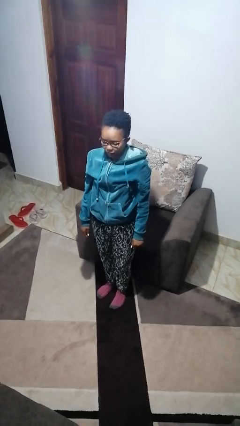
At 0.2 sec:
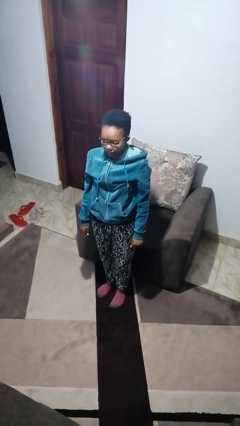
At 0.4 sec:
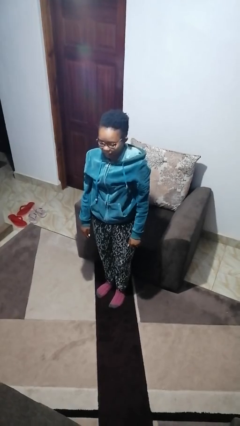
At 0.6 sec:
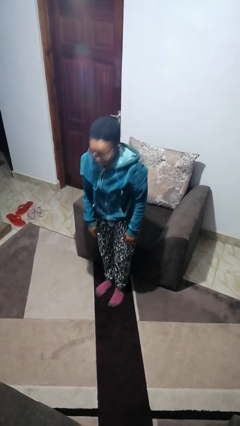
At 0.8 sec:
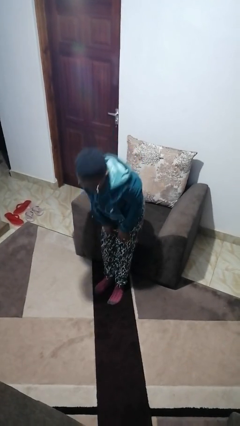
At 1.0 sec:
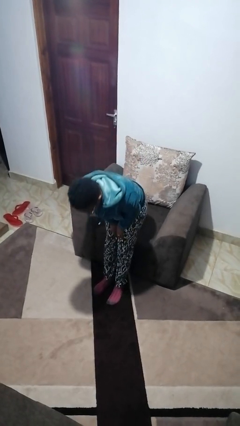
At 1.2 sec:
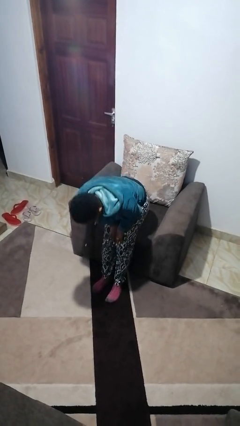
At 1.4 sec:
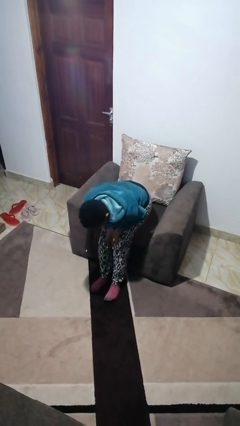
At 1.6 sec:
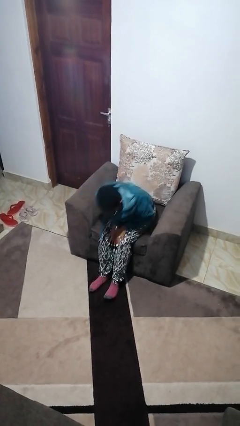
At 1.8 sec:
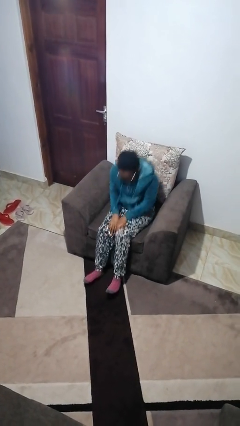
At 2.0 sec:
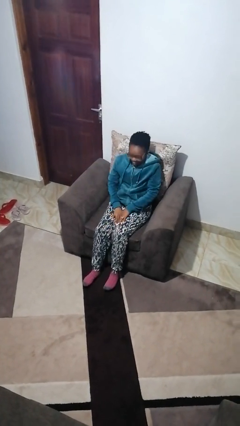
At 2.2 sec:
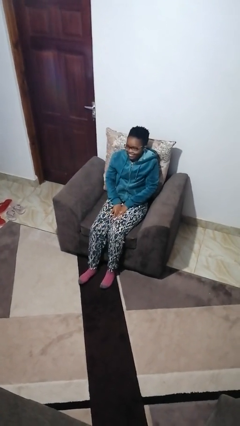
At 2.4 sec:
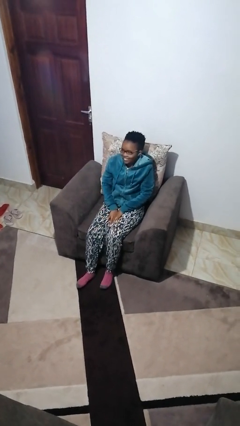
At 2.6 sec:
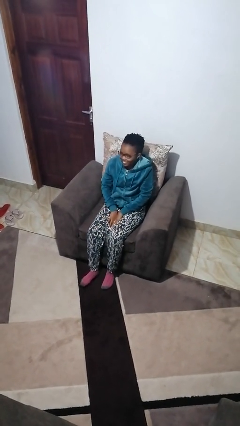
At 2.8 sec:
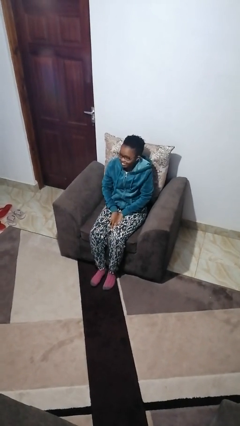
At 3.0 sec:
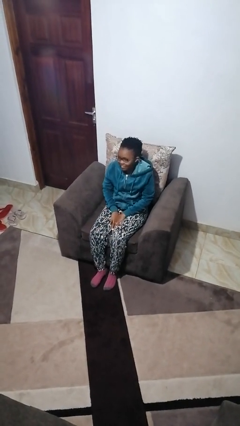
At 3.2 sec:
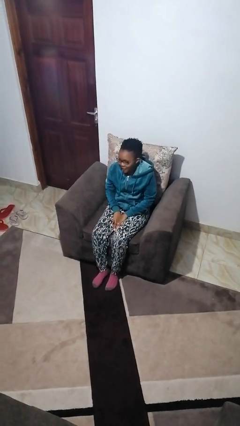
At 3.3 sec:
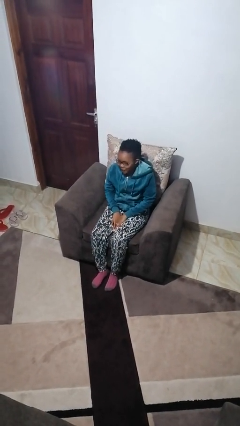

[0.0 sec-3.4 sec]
person sits down

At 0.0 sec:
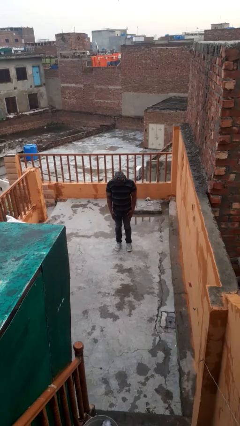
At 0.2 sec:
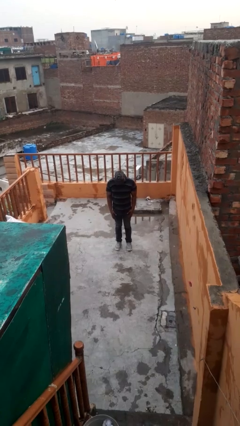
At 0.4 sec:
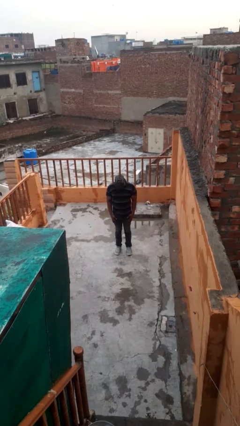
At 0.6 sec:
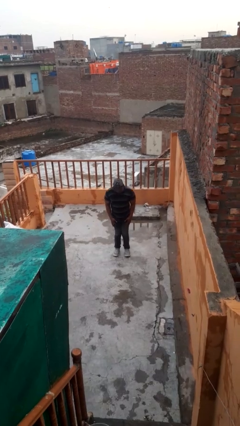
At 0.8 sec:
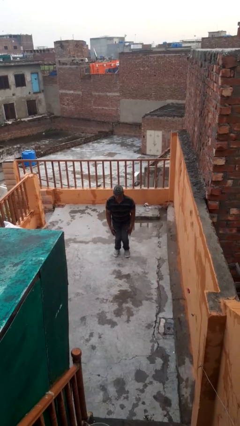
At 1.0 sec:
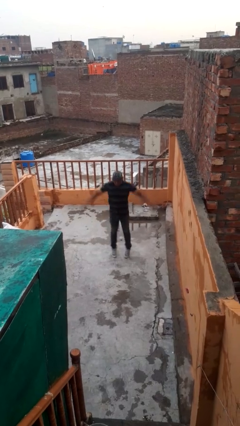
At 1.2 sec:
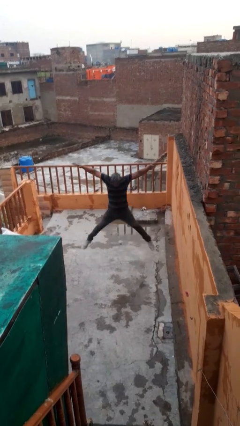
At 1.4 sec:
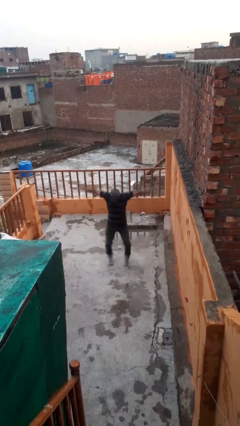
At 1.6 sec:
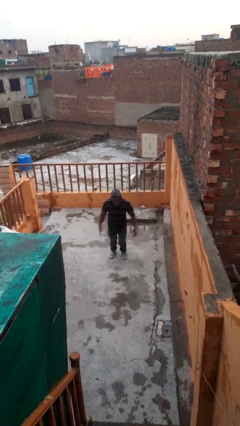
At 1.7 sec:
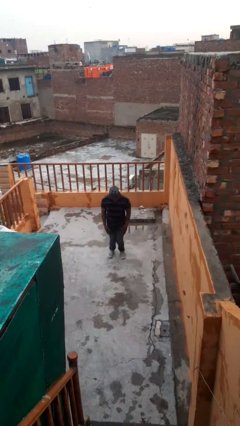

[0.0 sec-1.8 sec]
person exercises with jumping jacks

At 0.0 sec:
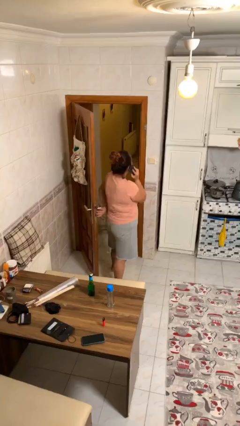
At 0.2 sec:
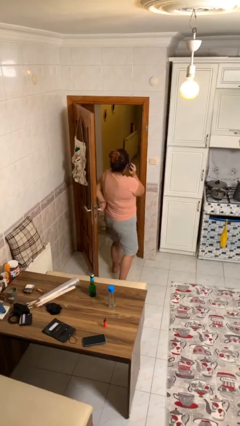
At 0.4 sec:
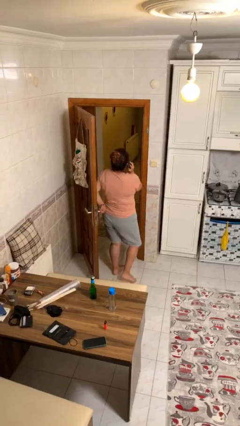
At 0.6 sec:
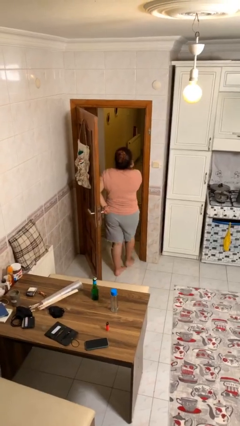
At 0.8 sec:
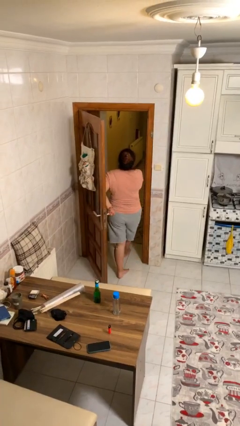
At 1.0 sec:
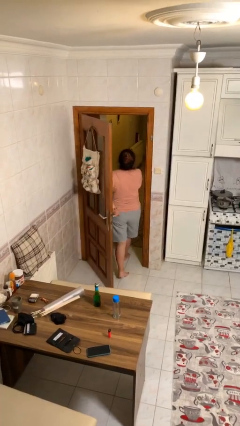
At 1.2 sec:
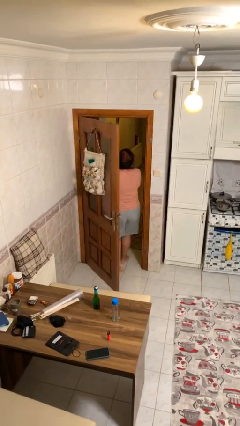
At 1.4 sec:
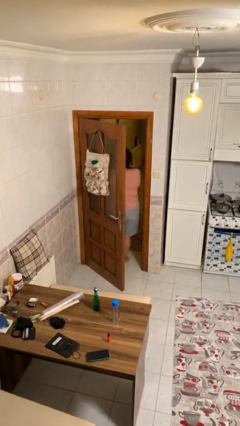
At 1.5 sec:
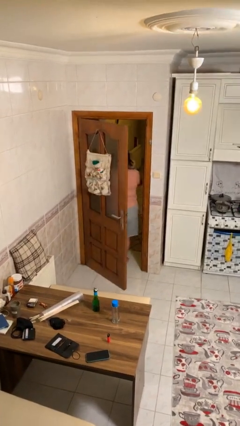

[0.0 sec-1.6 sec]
person exits scene through structure

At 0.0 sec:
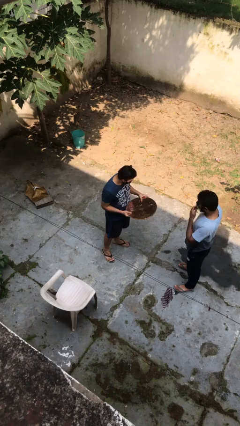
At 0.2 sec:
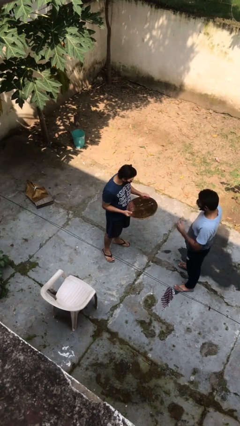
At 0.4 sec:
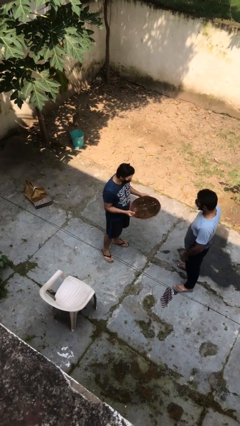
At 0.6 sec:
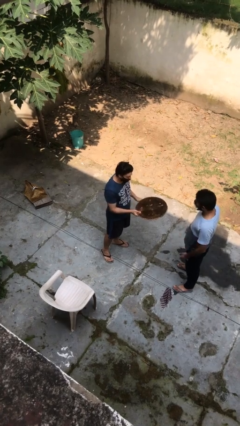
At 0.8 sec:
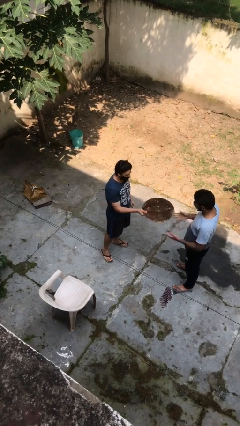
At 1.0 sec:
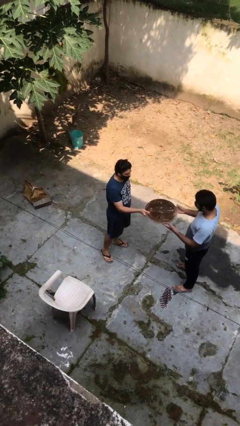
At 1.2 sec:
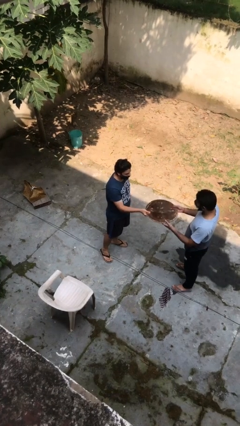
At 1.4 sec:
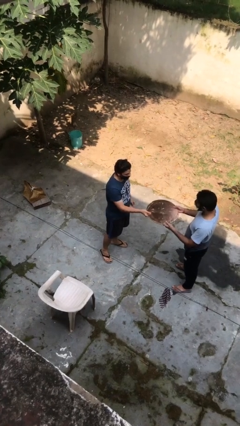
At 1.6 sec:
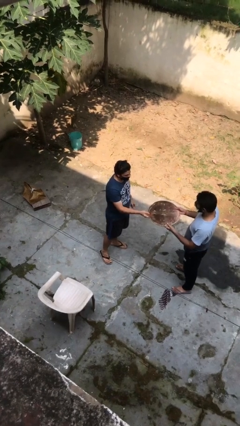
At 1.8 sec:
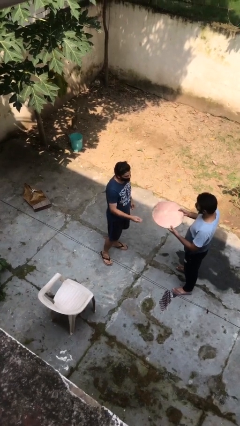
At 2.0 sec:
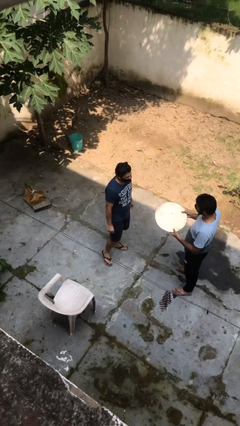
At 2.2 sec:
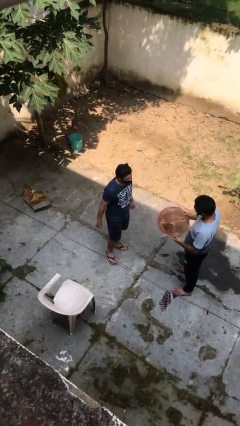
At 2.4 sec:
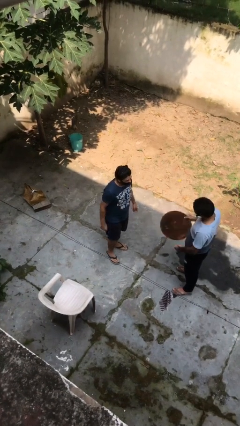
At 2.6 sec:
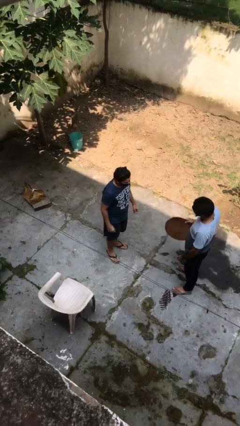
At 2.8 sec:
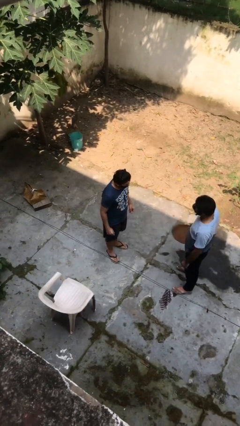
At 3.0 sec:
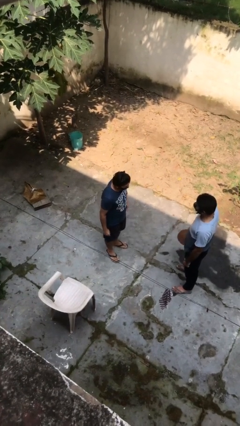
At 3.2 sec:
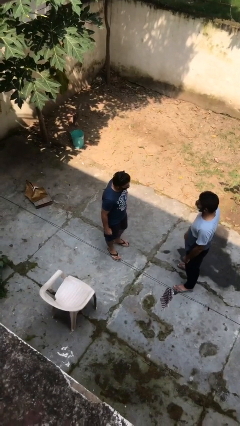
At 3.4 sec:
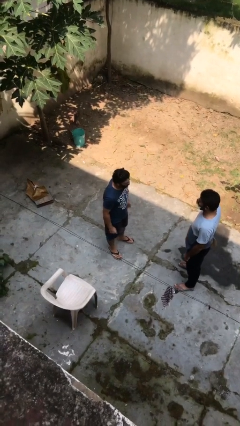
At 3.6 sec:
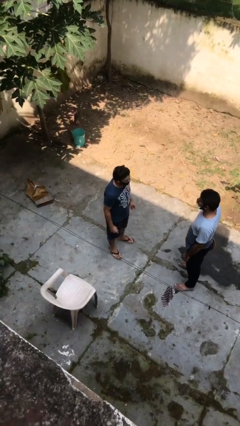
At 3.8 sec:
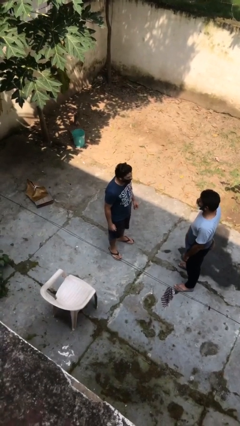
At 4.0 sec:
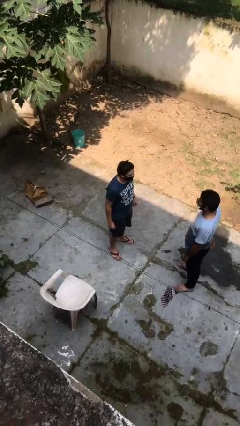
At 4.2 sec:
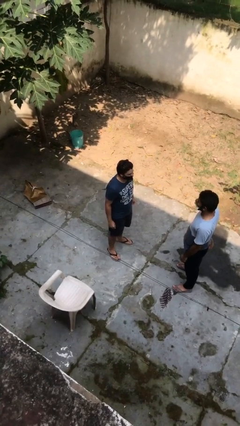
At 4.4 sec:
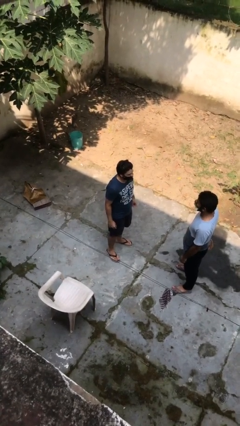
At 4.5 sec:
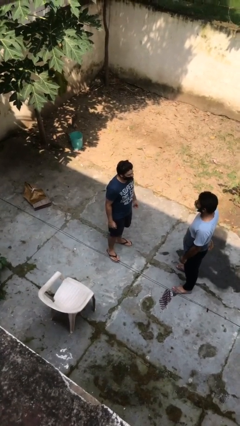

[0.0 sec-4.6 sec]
person transfers object to person

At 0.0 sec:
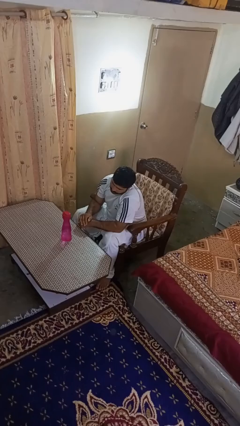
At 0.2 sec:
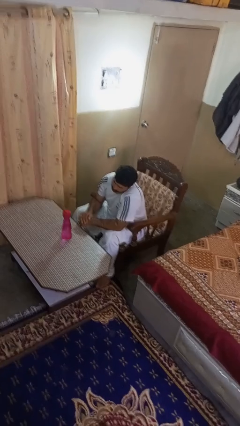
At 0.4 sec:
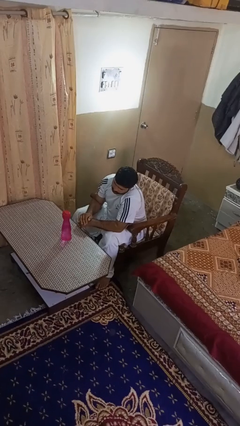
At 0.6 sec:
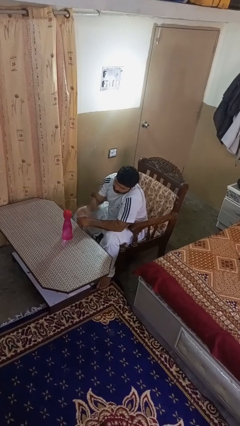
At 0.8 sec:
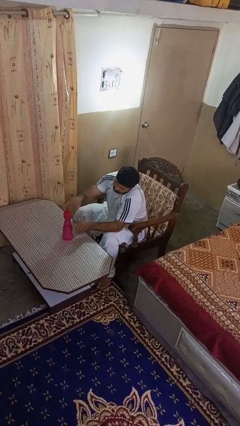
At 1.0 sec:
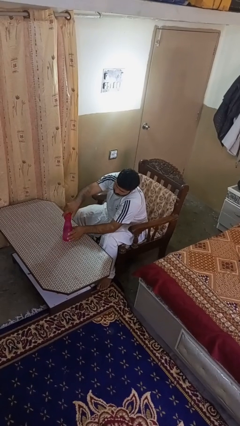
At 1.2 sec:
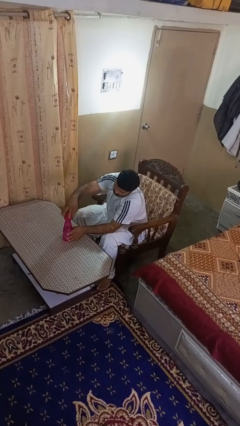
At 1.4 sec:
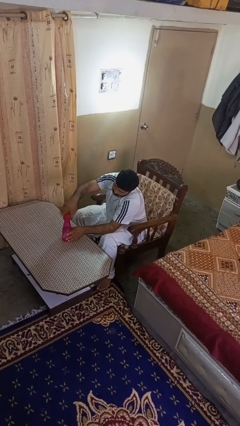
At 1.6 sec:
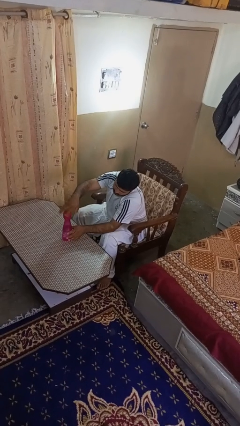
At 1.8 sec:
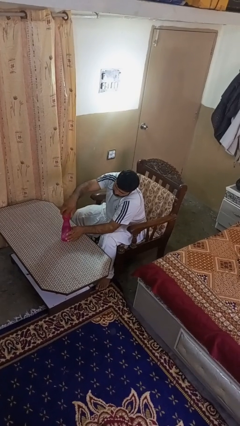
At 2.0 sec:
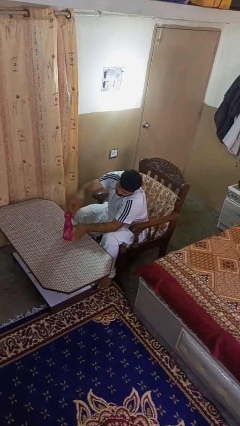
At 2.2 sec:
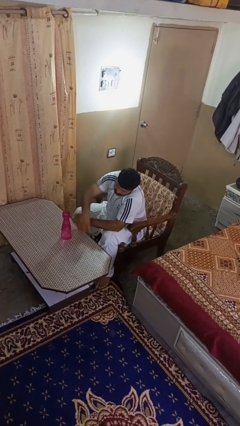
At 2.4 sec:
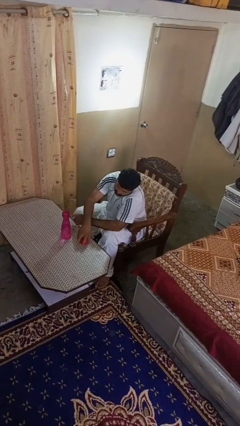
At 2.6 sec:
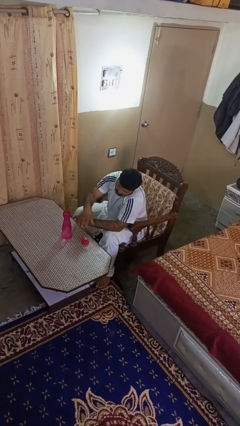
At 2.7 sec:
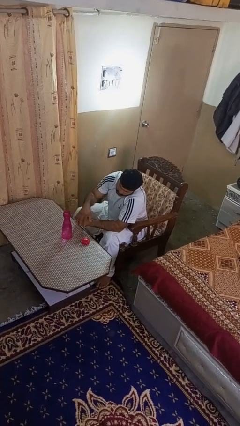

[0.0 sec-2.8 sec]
person unscrews lid from bottle

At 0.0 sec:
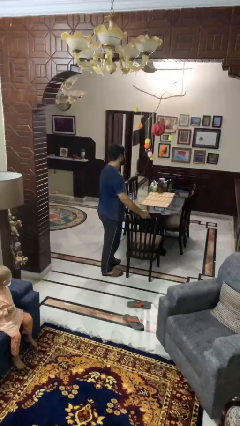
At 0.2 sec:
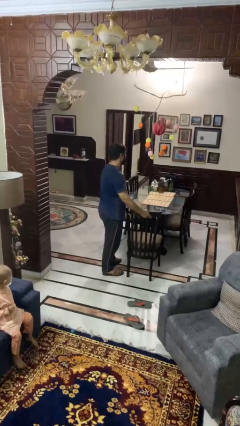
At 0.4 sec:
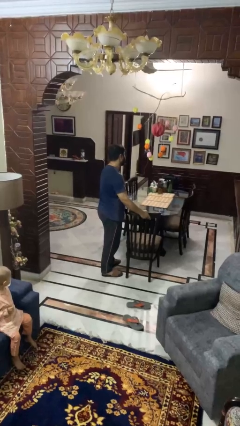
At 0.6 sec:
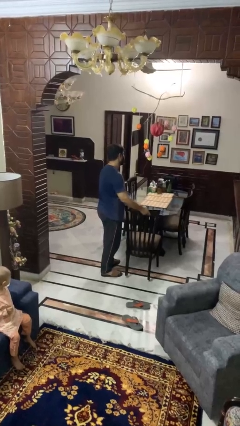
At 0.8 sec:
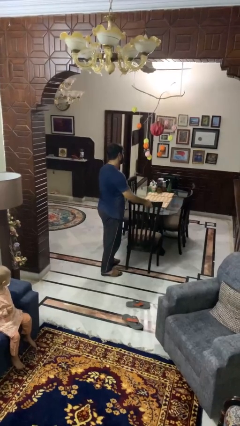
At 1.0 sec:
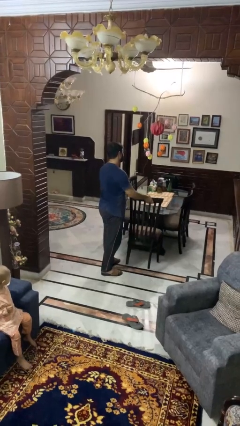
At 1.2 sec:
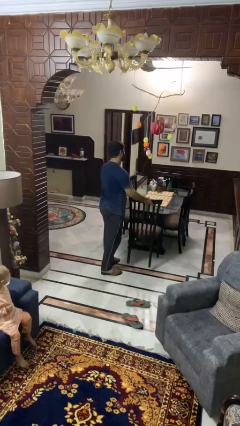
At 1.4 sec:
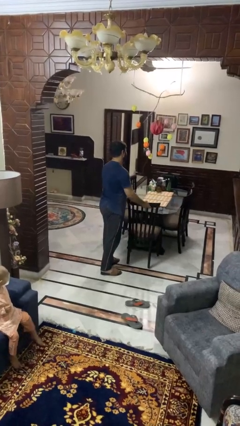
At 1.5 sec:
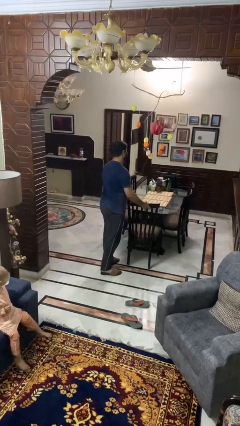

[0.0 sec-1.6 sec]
person pushes in chair

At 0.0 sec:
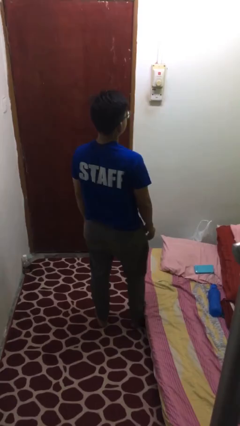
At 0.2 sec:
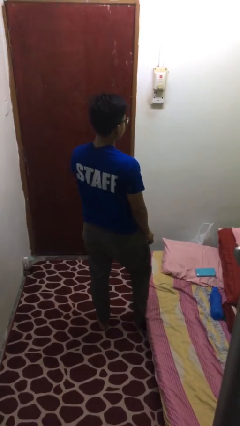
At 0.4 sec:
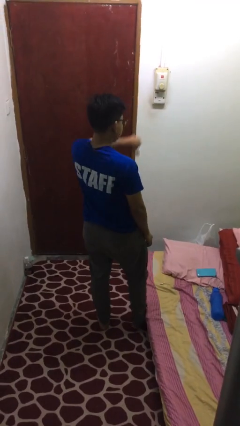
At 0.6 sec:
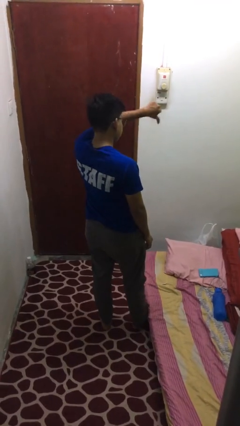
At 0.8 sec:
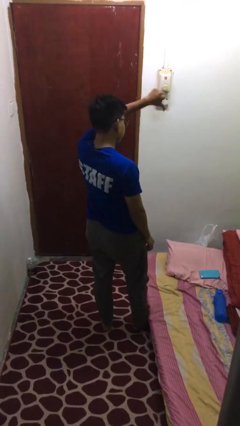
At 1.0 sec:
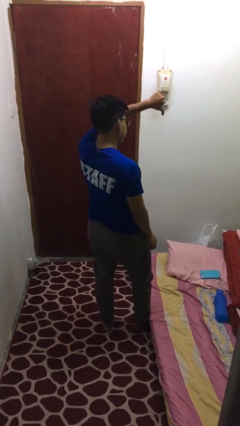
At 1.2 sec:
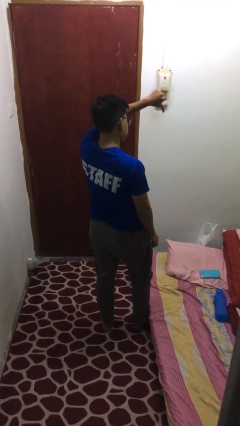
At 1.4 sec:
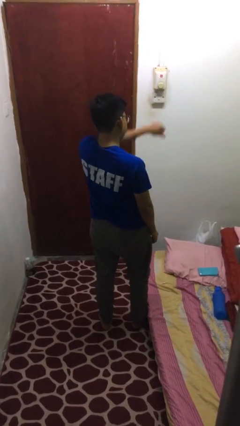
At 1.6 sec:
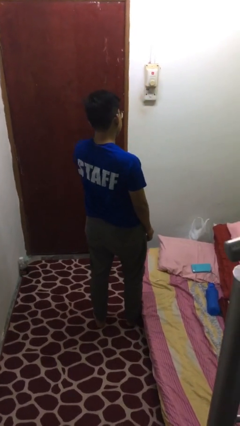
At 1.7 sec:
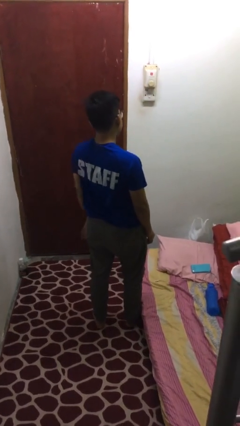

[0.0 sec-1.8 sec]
person gestures thumbs down
